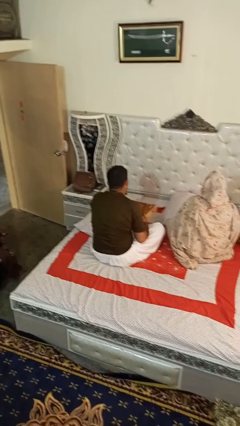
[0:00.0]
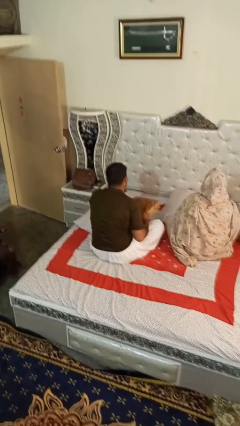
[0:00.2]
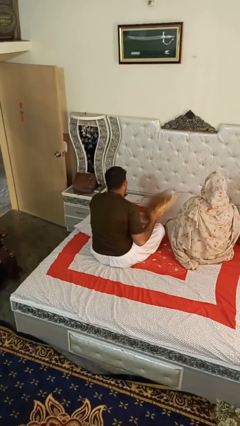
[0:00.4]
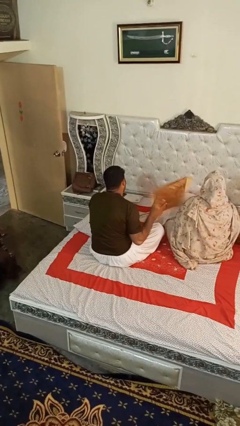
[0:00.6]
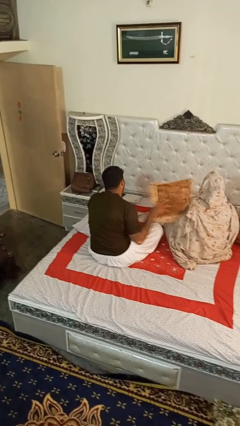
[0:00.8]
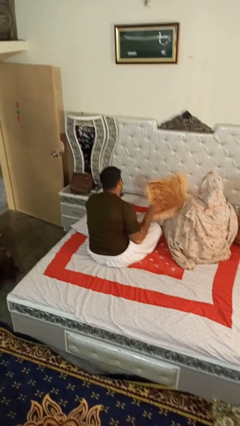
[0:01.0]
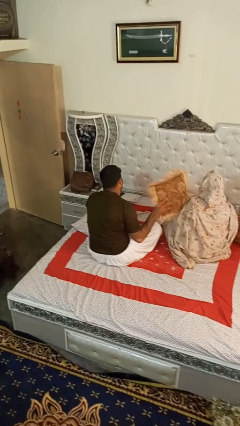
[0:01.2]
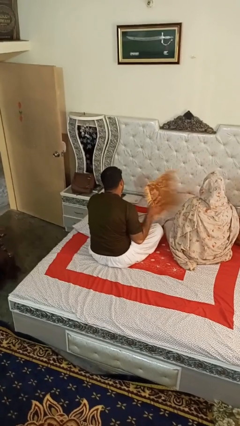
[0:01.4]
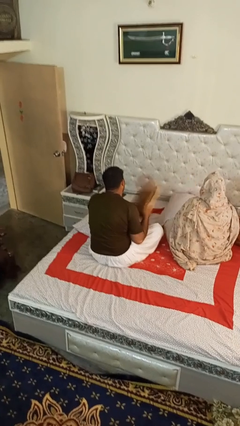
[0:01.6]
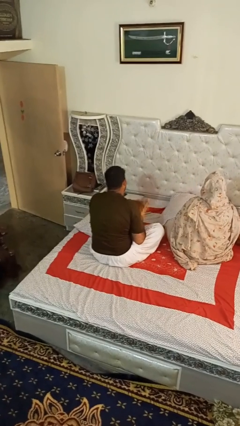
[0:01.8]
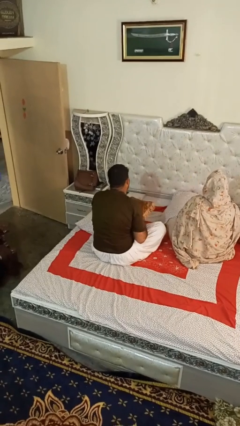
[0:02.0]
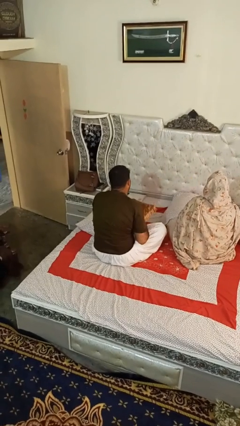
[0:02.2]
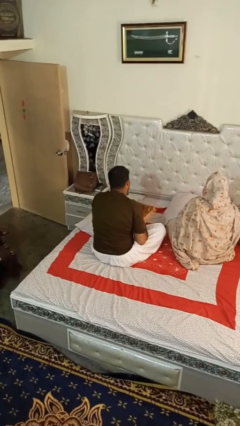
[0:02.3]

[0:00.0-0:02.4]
person hits person with pillow

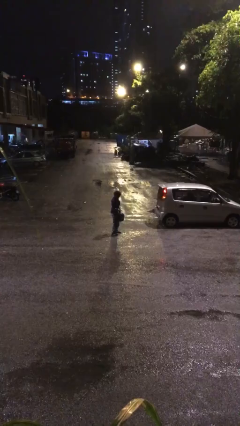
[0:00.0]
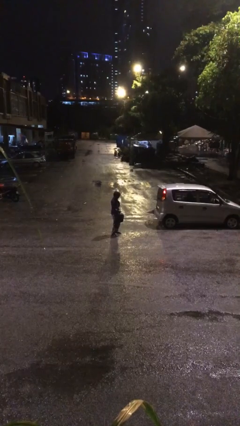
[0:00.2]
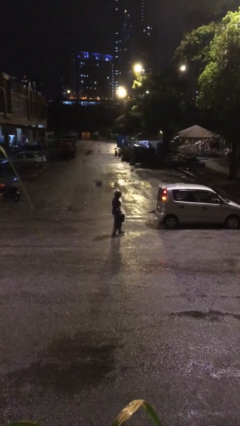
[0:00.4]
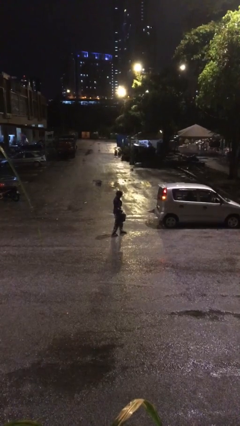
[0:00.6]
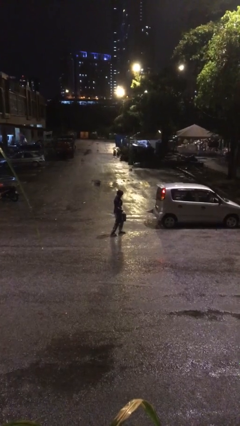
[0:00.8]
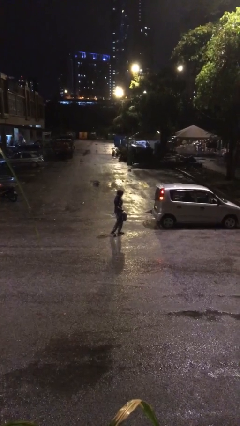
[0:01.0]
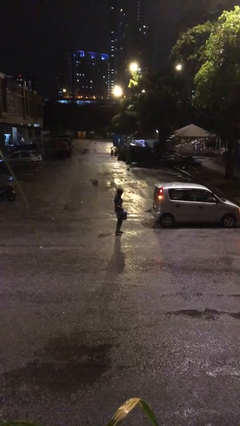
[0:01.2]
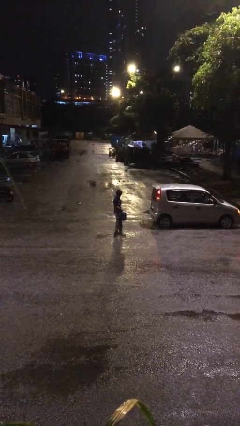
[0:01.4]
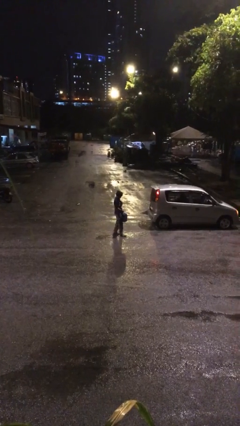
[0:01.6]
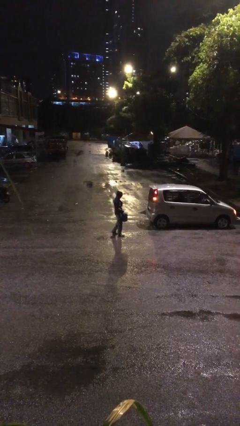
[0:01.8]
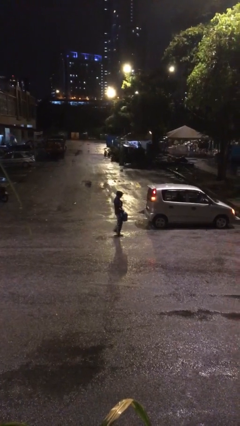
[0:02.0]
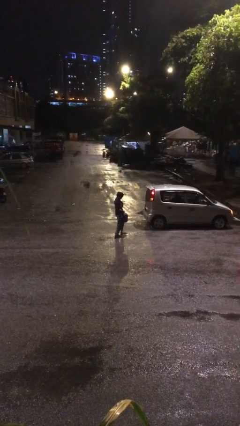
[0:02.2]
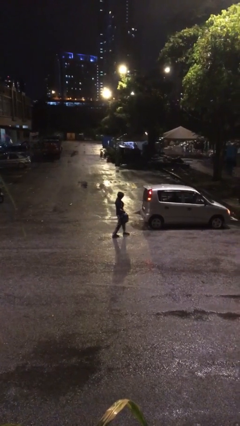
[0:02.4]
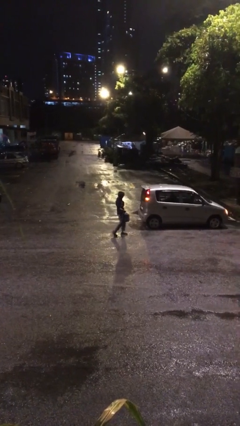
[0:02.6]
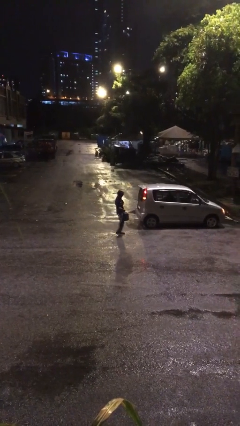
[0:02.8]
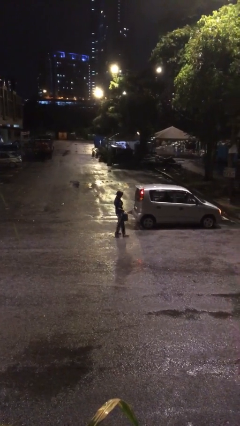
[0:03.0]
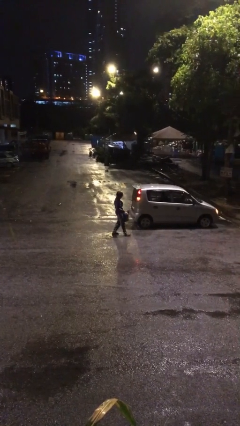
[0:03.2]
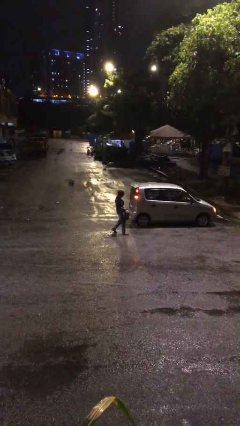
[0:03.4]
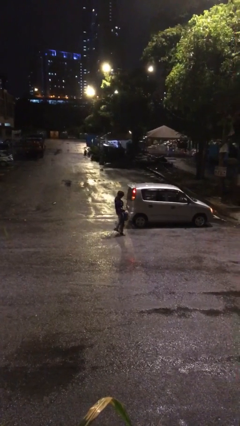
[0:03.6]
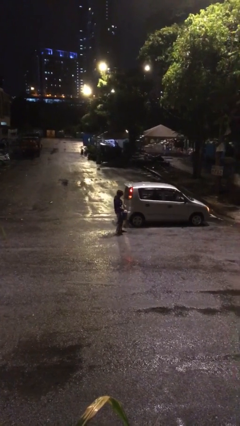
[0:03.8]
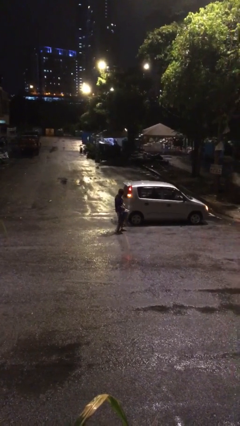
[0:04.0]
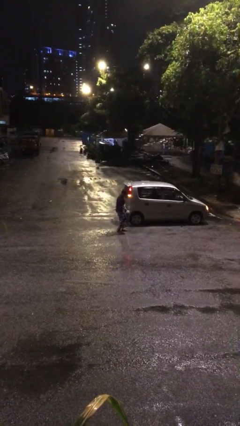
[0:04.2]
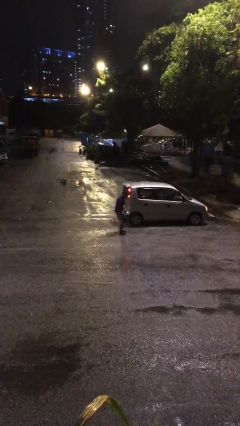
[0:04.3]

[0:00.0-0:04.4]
person carries heavy object

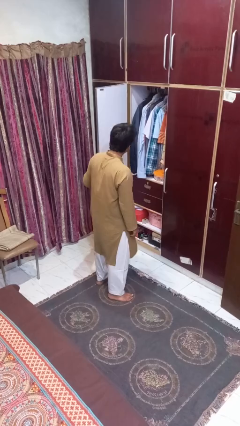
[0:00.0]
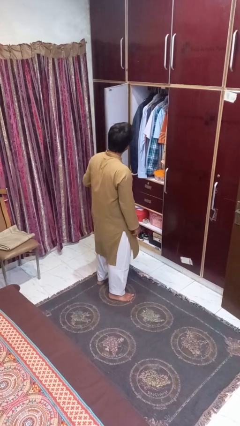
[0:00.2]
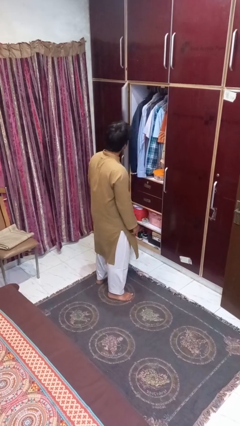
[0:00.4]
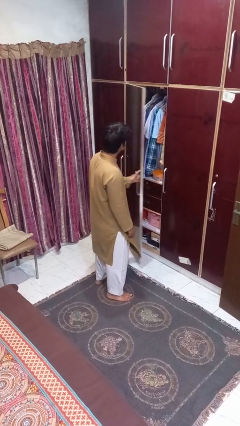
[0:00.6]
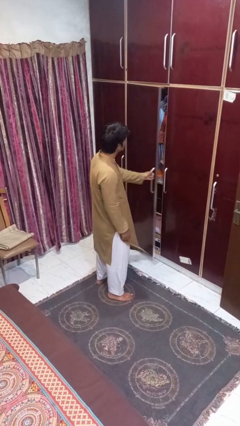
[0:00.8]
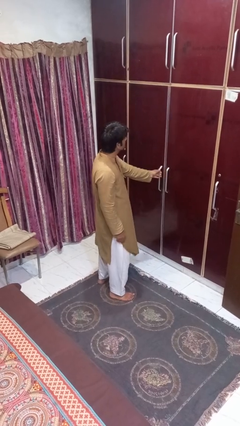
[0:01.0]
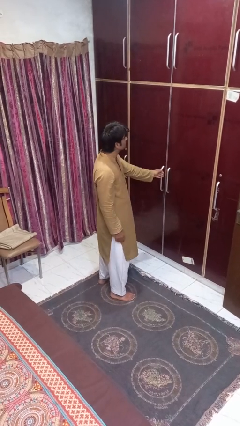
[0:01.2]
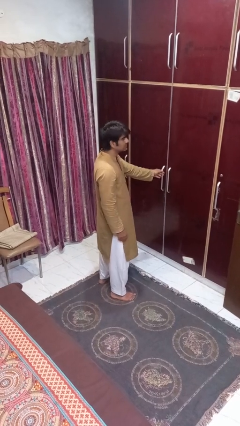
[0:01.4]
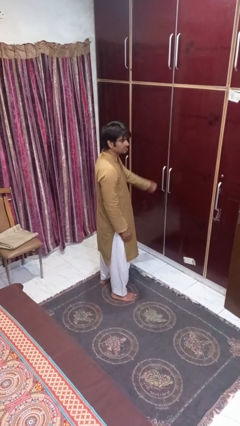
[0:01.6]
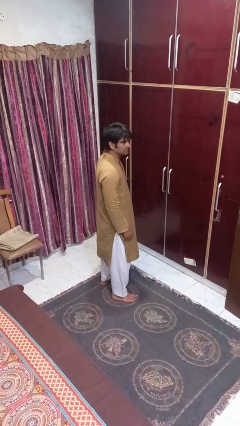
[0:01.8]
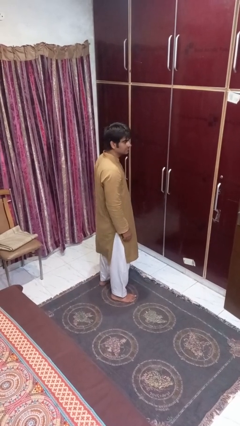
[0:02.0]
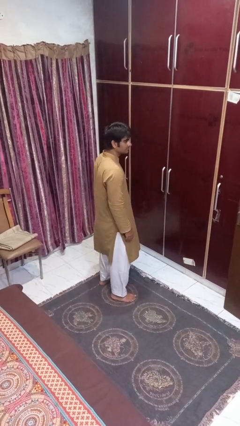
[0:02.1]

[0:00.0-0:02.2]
person closes closet door

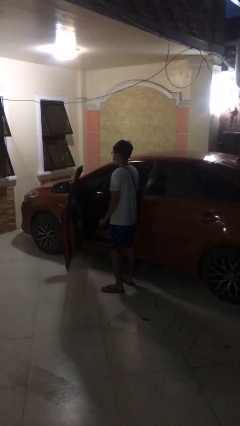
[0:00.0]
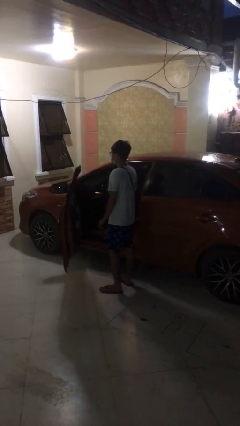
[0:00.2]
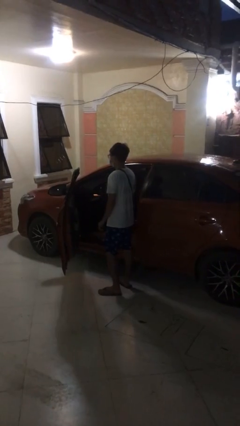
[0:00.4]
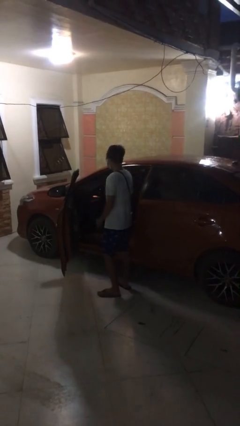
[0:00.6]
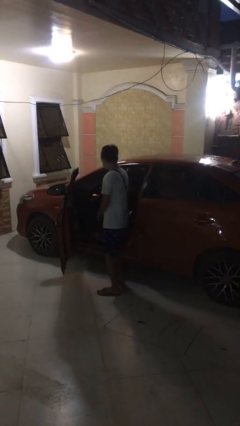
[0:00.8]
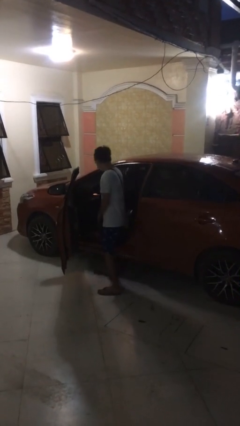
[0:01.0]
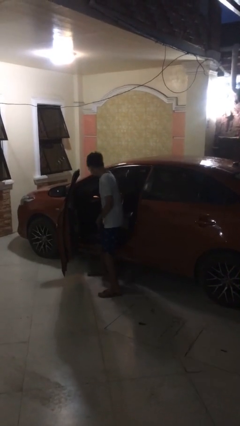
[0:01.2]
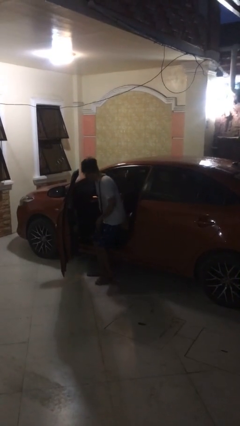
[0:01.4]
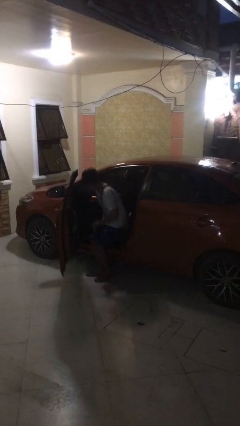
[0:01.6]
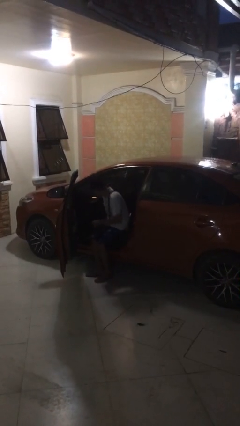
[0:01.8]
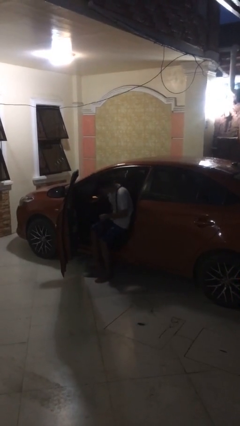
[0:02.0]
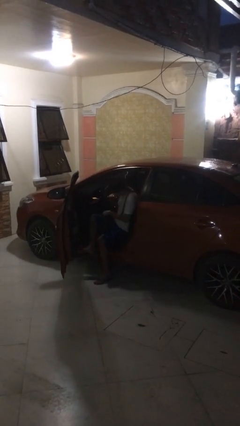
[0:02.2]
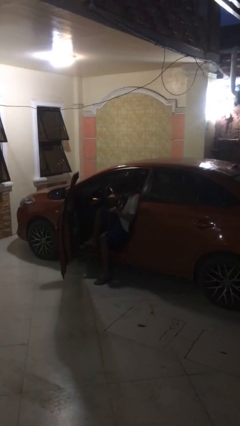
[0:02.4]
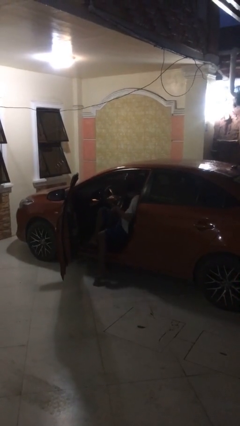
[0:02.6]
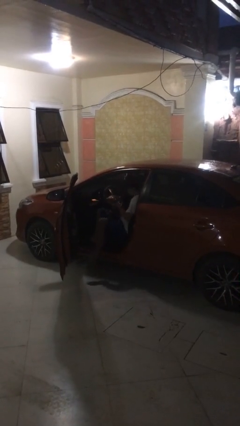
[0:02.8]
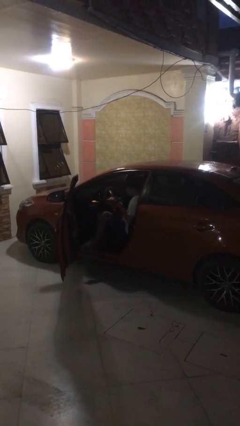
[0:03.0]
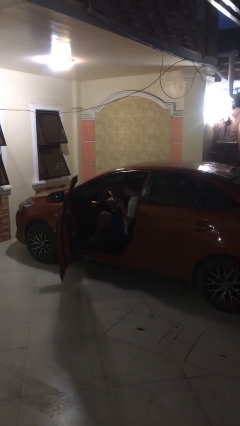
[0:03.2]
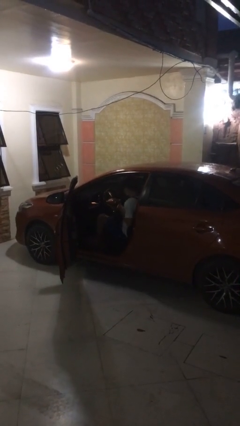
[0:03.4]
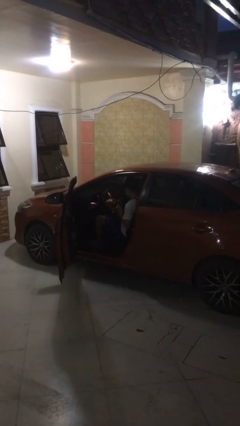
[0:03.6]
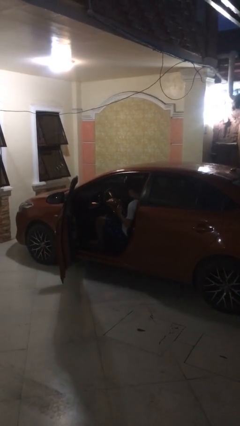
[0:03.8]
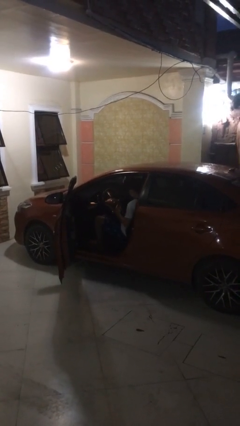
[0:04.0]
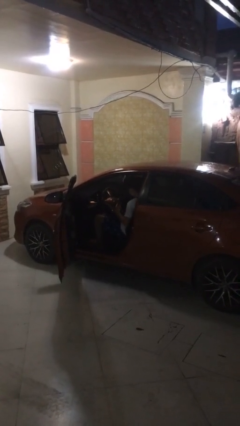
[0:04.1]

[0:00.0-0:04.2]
person enters car

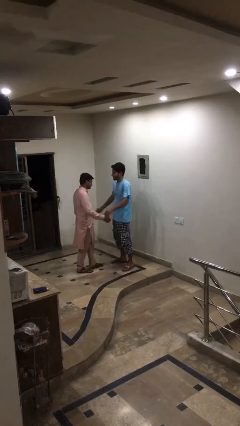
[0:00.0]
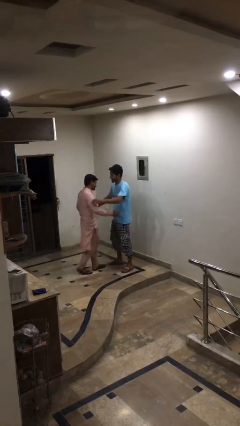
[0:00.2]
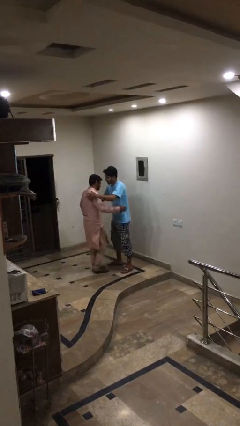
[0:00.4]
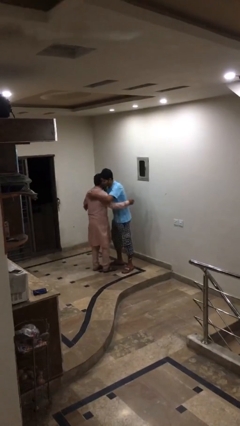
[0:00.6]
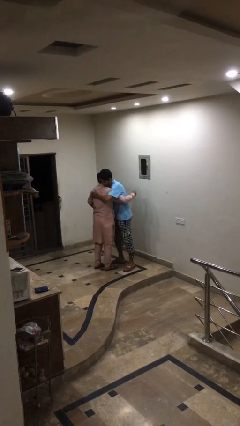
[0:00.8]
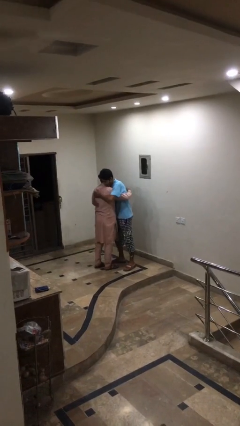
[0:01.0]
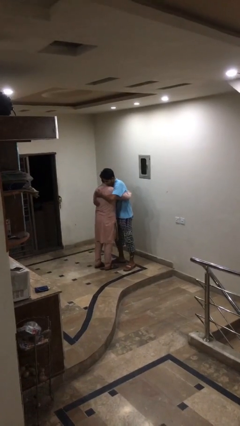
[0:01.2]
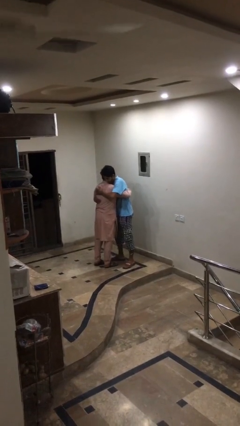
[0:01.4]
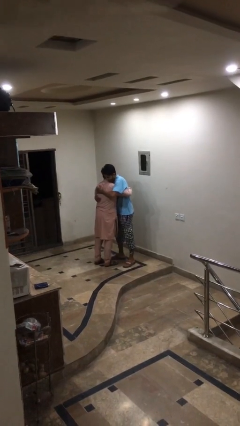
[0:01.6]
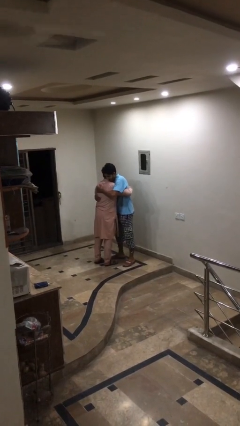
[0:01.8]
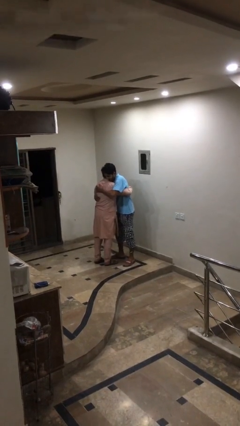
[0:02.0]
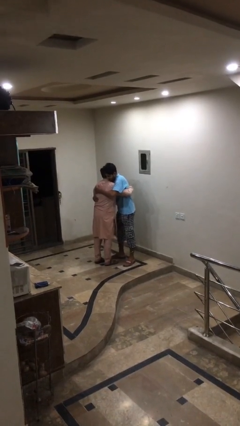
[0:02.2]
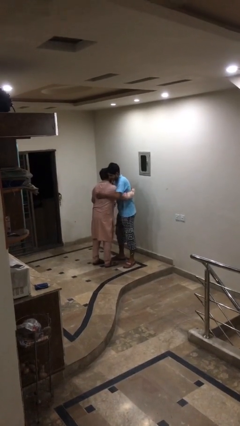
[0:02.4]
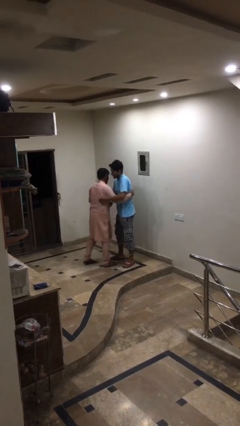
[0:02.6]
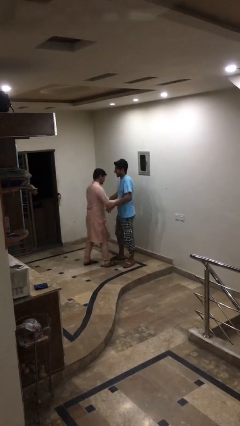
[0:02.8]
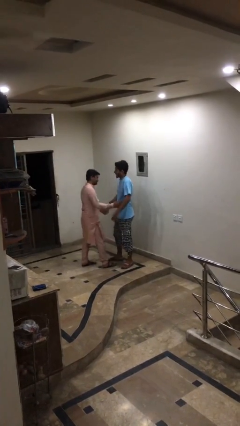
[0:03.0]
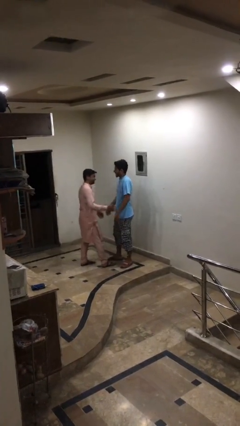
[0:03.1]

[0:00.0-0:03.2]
person embraces person

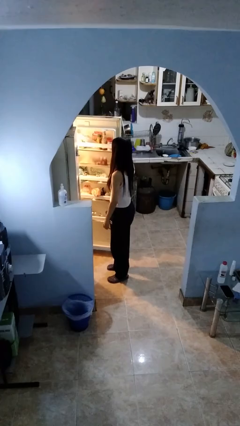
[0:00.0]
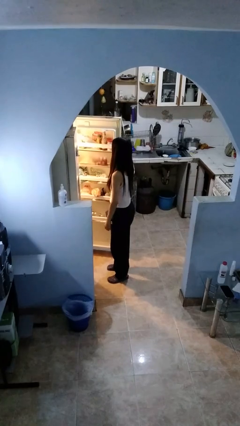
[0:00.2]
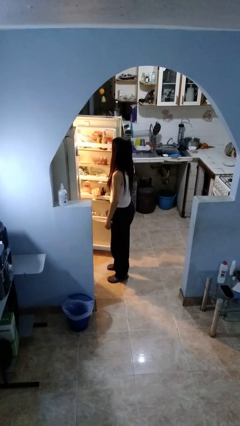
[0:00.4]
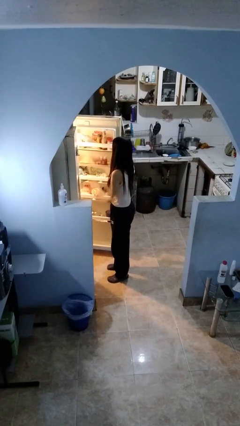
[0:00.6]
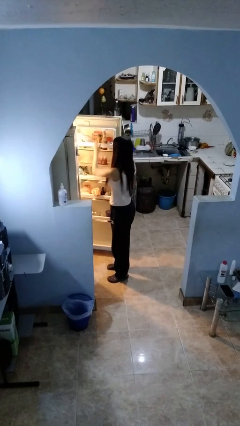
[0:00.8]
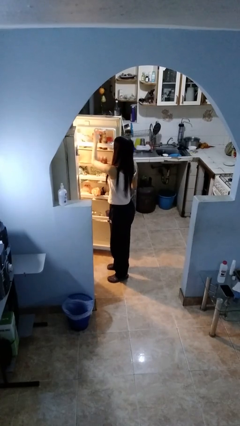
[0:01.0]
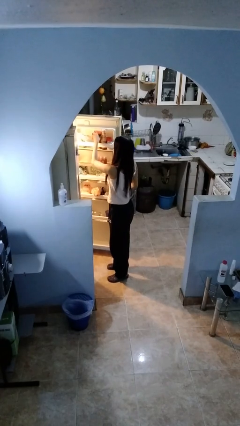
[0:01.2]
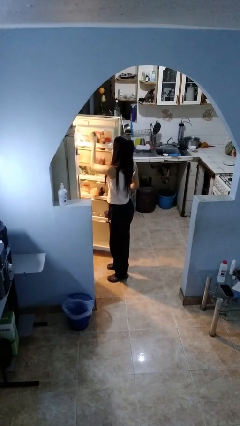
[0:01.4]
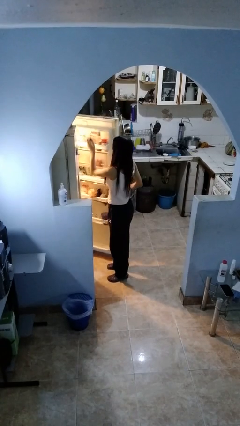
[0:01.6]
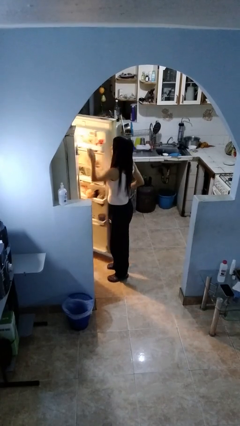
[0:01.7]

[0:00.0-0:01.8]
person takes object from refrigerator
